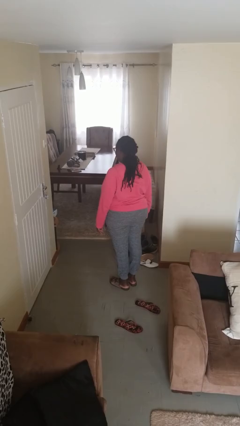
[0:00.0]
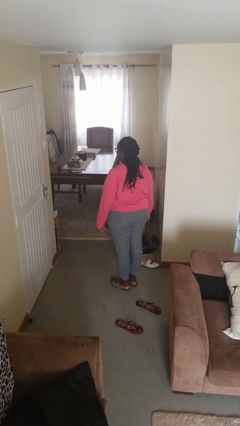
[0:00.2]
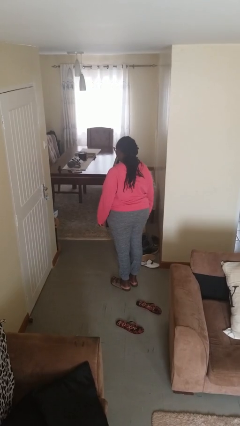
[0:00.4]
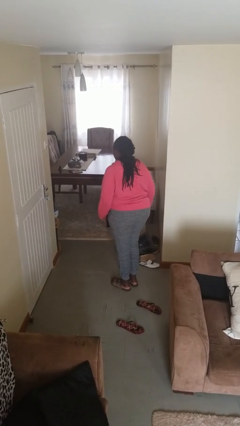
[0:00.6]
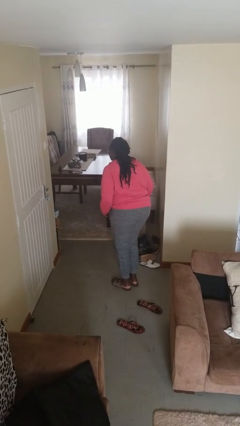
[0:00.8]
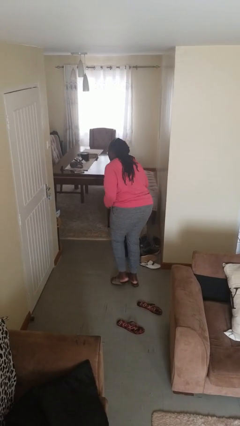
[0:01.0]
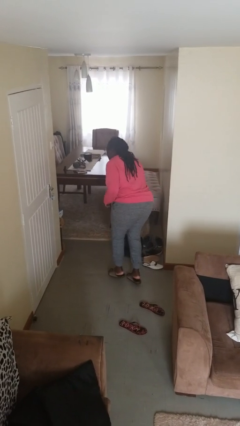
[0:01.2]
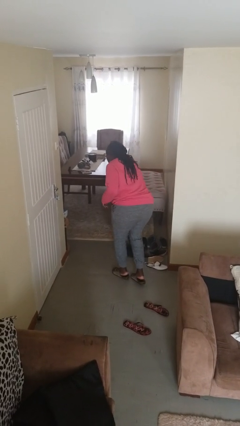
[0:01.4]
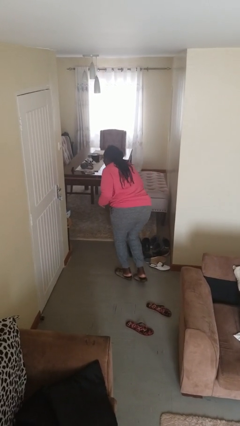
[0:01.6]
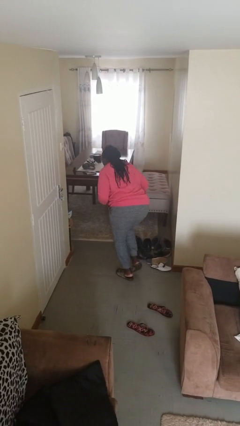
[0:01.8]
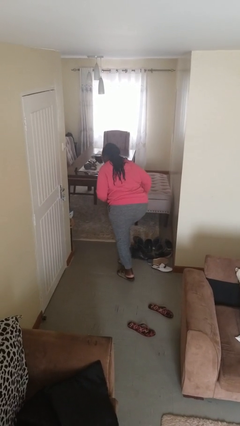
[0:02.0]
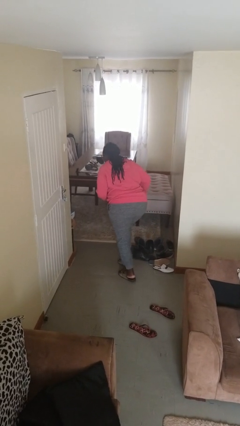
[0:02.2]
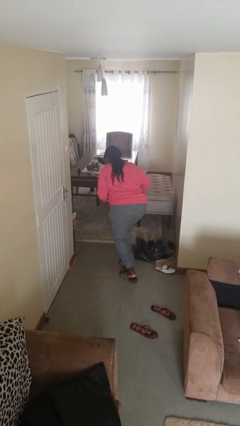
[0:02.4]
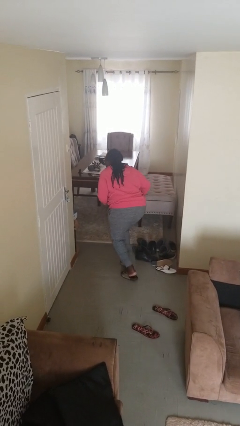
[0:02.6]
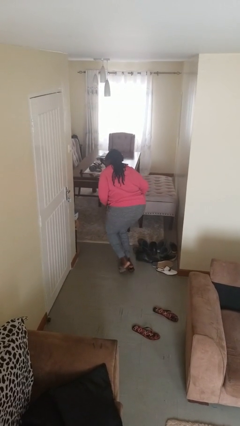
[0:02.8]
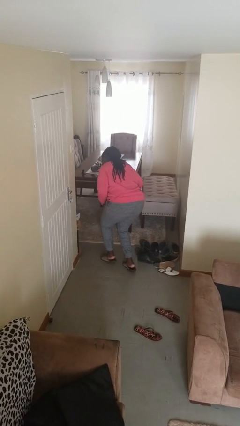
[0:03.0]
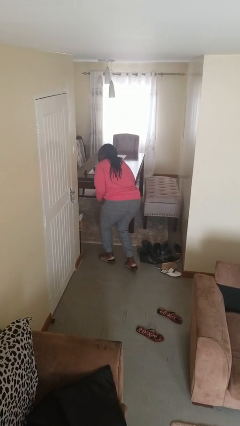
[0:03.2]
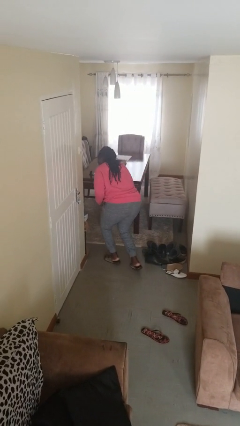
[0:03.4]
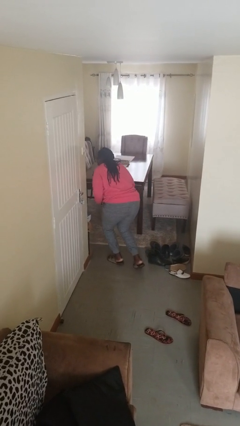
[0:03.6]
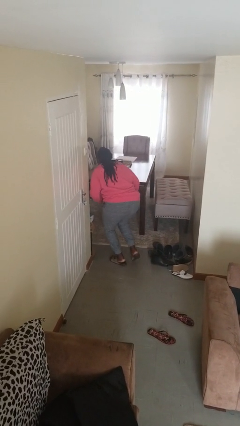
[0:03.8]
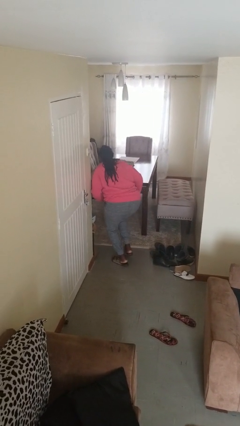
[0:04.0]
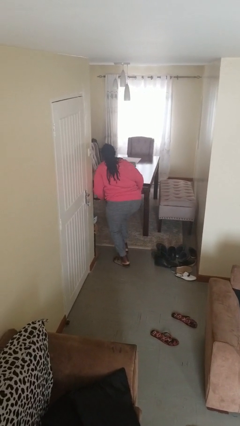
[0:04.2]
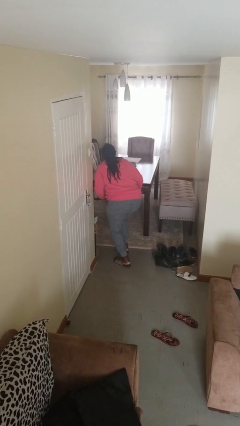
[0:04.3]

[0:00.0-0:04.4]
person walks tiptoe

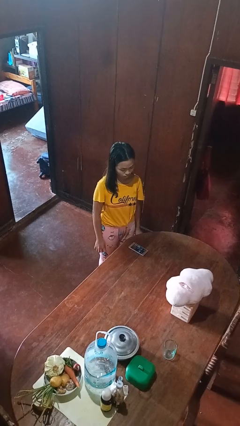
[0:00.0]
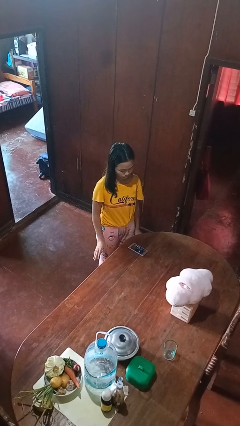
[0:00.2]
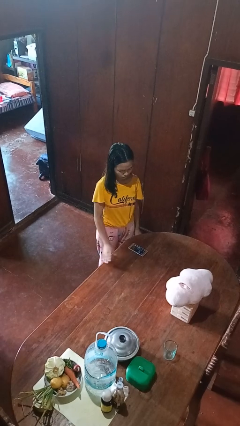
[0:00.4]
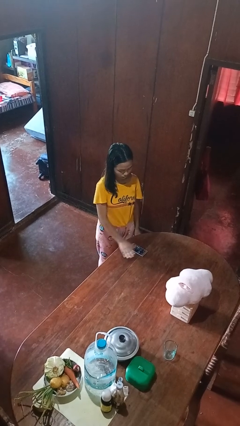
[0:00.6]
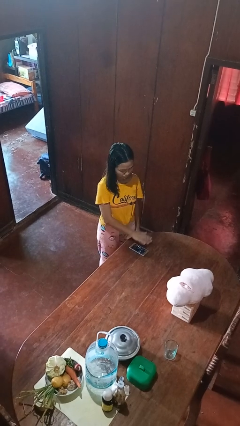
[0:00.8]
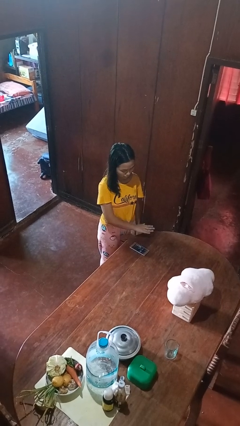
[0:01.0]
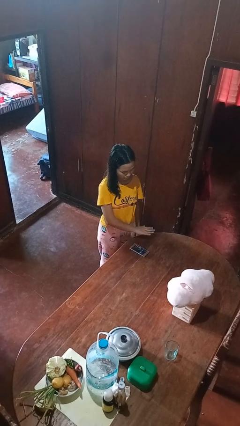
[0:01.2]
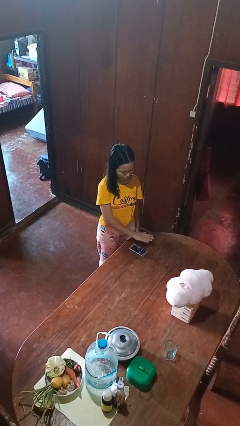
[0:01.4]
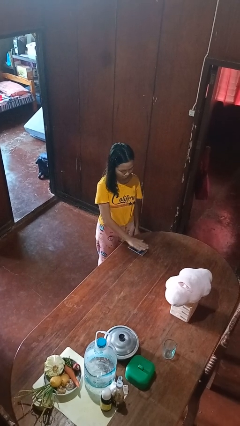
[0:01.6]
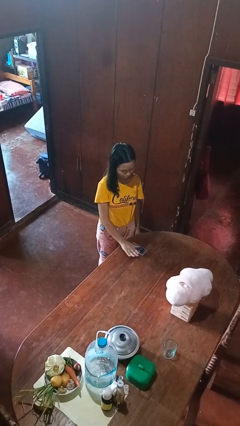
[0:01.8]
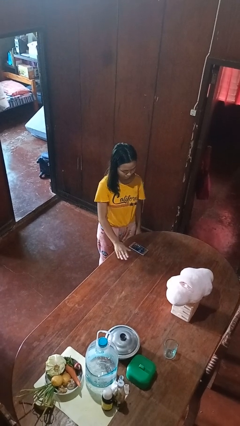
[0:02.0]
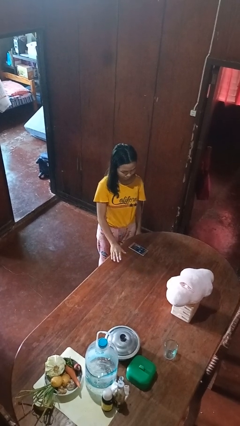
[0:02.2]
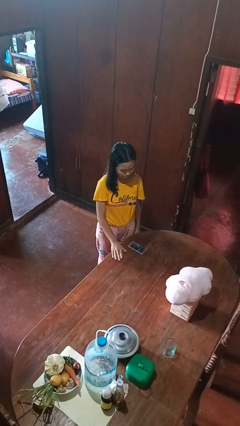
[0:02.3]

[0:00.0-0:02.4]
person waves hand over object

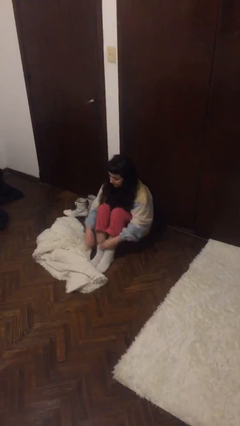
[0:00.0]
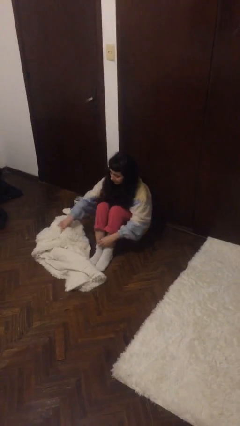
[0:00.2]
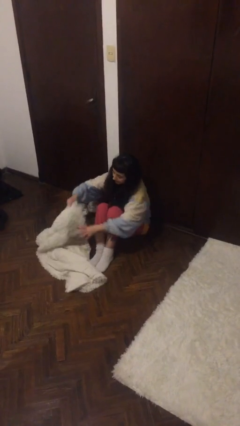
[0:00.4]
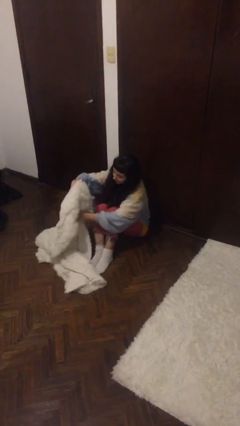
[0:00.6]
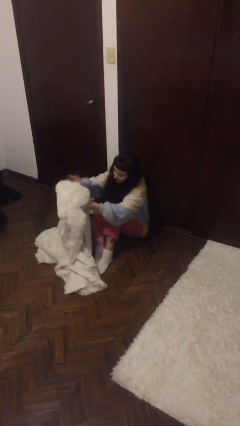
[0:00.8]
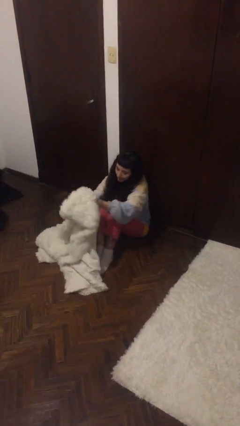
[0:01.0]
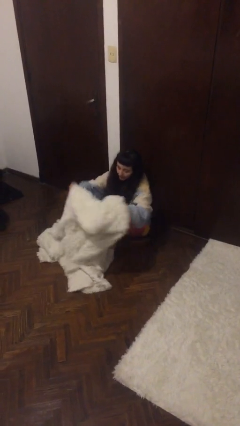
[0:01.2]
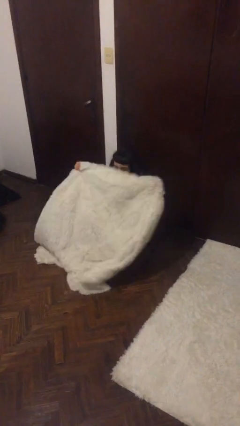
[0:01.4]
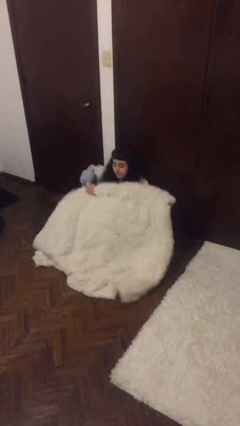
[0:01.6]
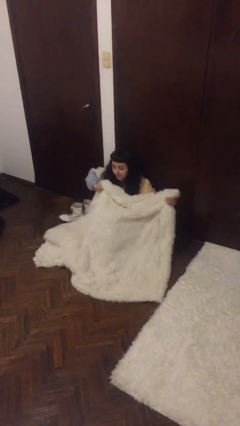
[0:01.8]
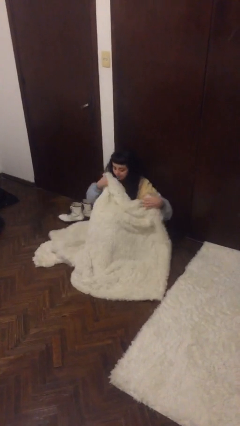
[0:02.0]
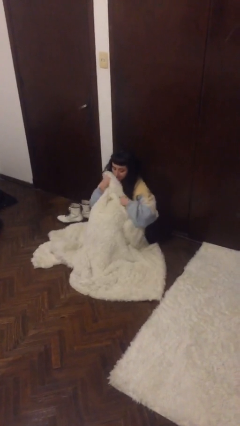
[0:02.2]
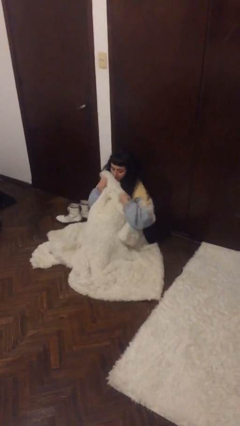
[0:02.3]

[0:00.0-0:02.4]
person covers with blanket

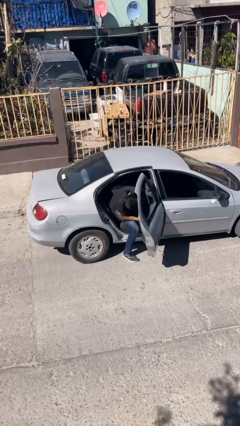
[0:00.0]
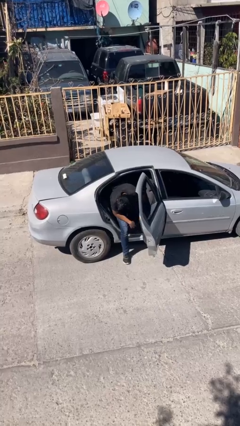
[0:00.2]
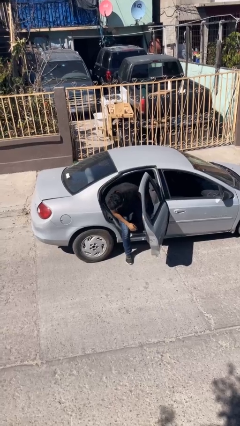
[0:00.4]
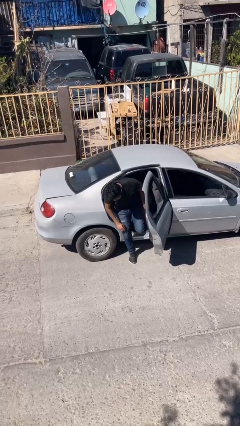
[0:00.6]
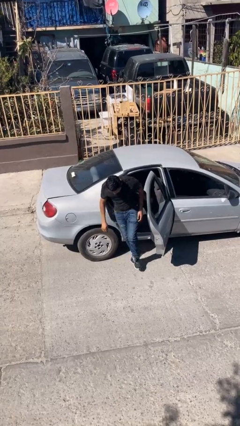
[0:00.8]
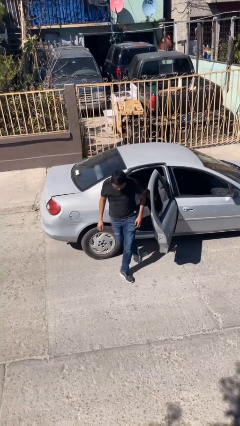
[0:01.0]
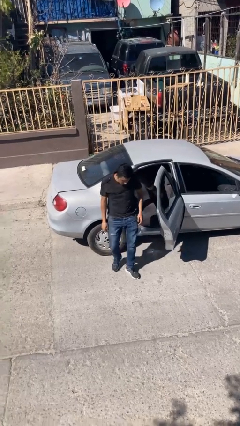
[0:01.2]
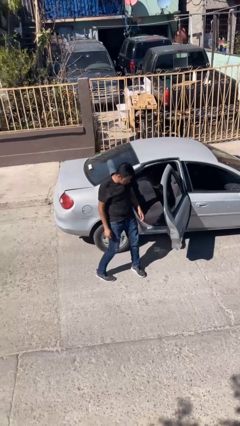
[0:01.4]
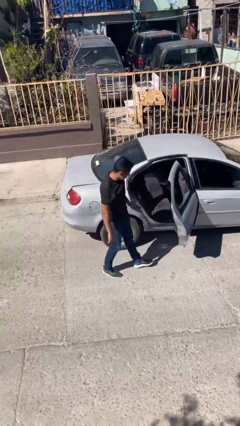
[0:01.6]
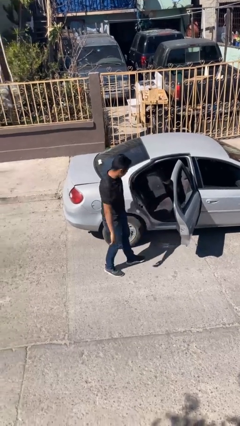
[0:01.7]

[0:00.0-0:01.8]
person exits car

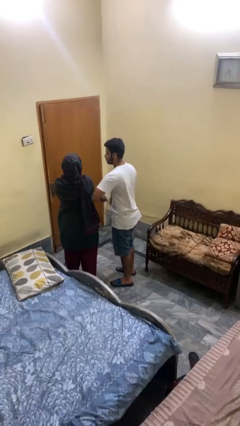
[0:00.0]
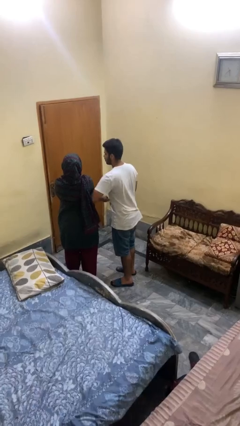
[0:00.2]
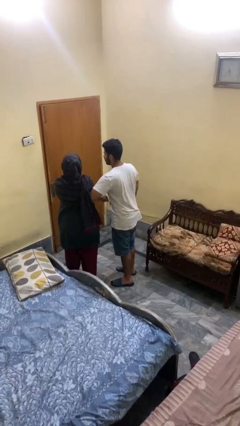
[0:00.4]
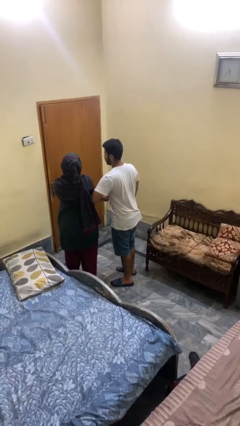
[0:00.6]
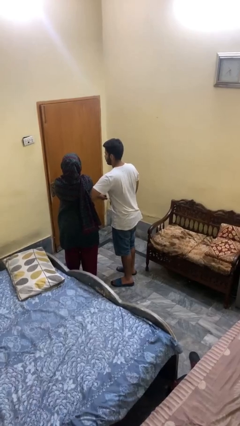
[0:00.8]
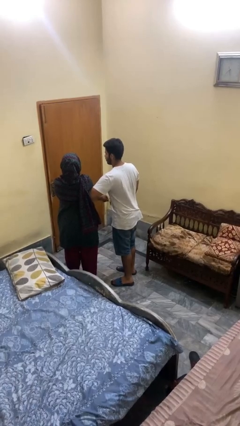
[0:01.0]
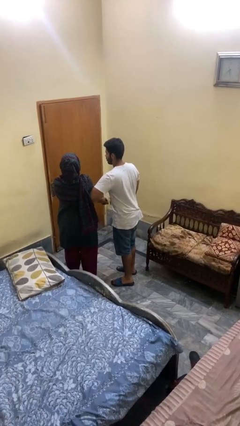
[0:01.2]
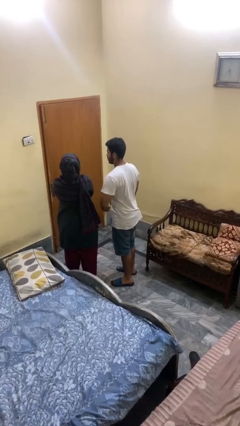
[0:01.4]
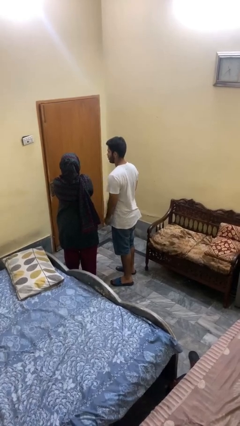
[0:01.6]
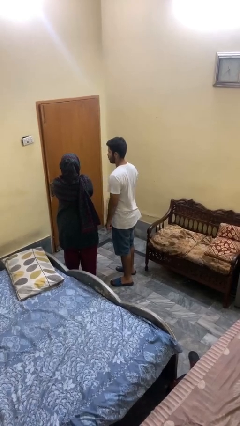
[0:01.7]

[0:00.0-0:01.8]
person nudges person with elbow

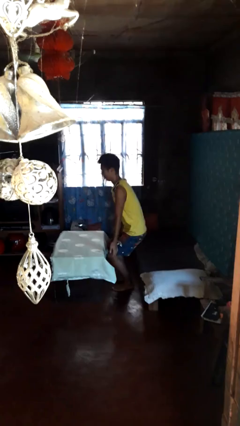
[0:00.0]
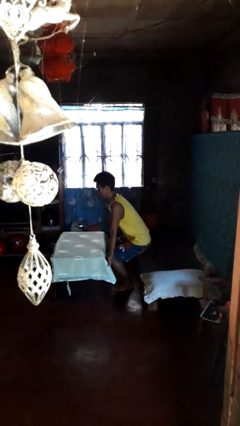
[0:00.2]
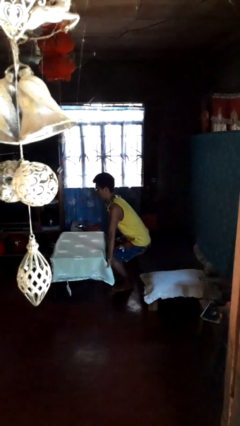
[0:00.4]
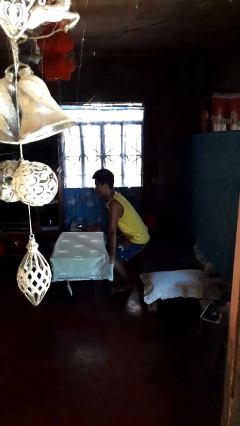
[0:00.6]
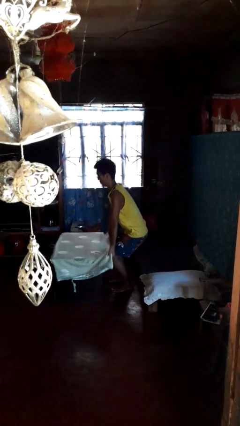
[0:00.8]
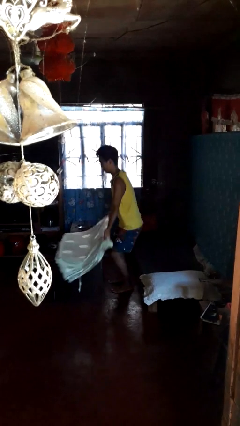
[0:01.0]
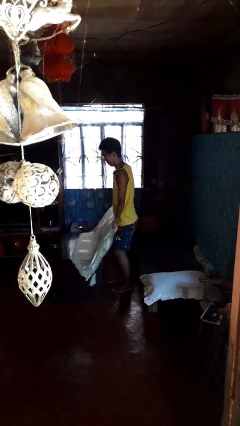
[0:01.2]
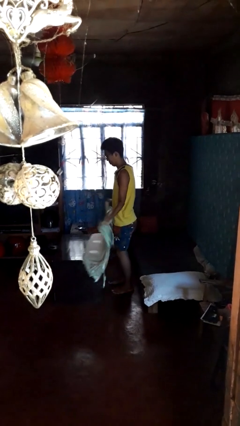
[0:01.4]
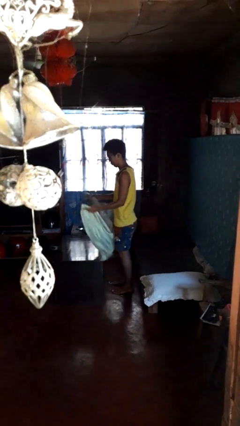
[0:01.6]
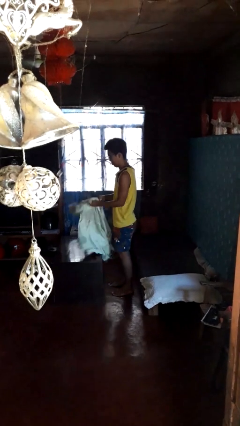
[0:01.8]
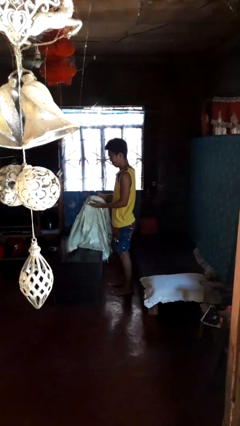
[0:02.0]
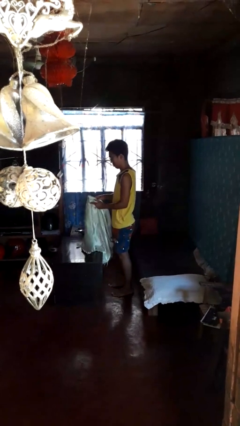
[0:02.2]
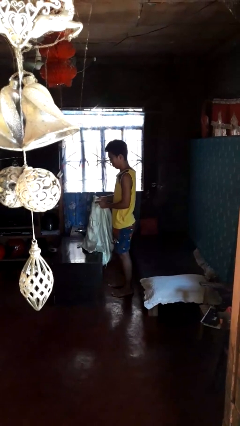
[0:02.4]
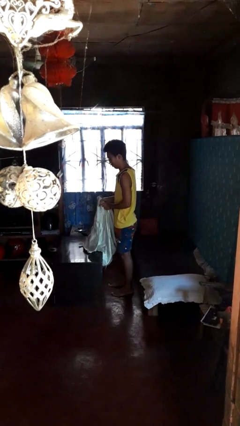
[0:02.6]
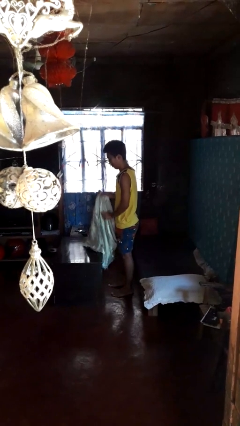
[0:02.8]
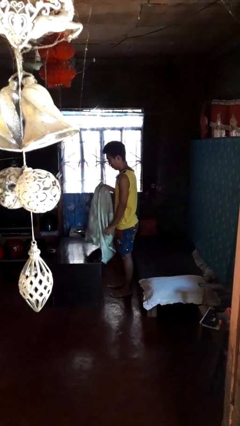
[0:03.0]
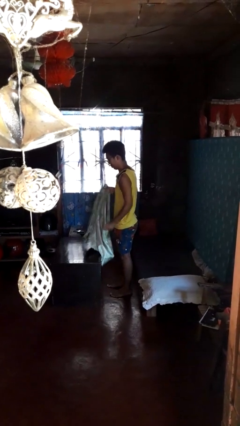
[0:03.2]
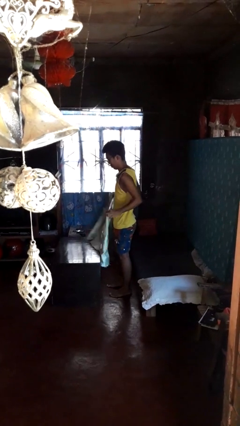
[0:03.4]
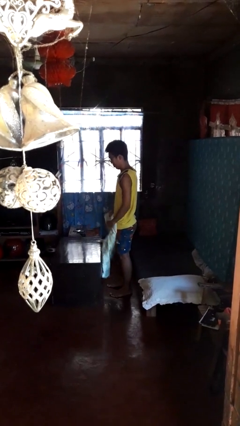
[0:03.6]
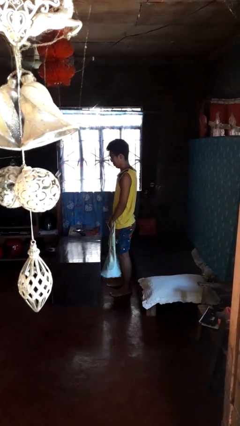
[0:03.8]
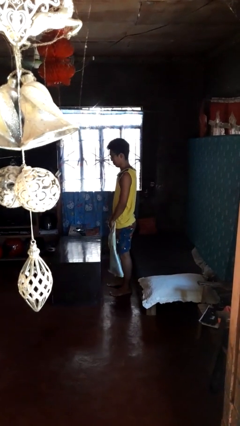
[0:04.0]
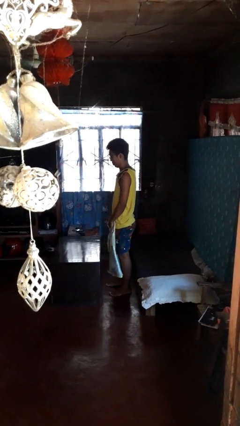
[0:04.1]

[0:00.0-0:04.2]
person folds tablecloth

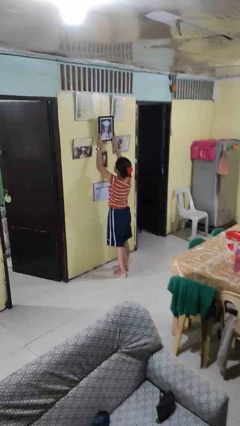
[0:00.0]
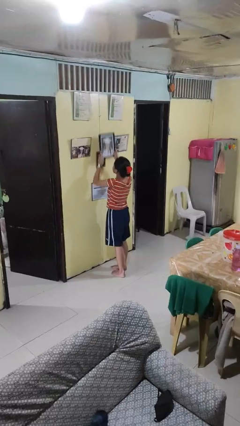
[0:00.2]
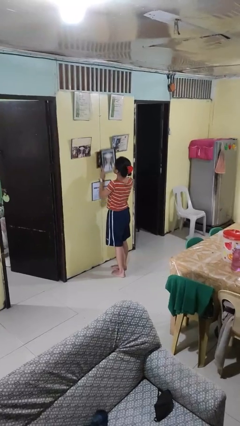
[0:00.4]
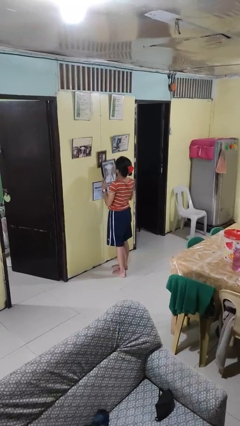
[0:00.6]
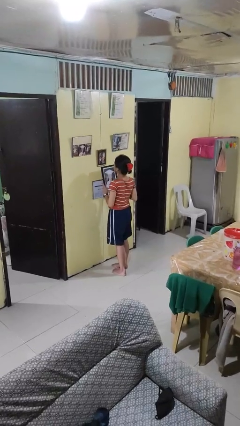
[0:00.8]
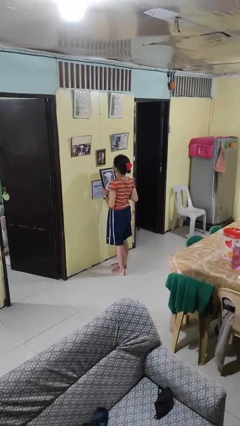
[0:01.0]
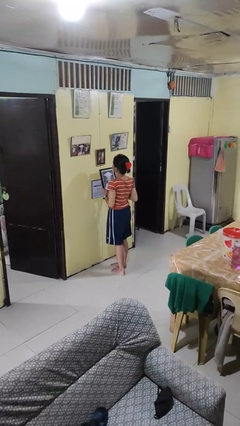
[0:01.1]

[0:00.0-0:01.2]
person takes down picture frame
